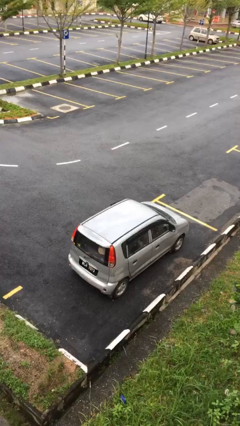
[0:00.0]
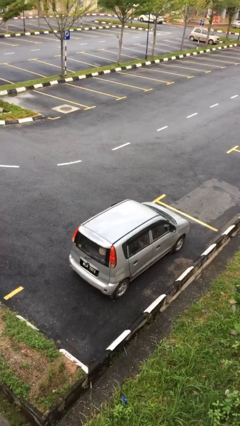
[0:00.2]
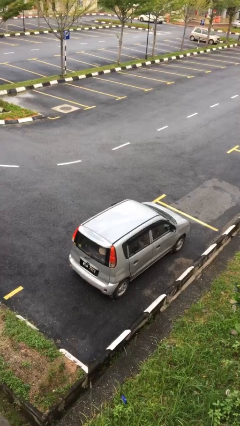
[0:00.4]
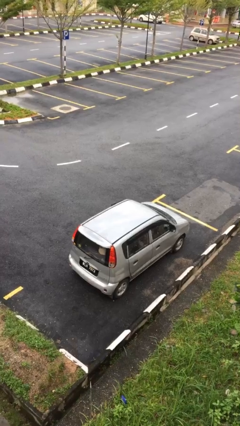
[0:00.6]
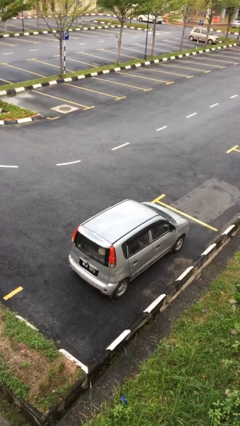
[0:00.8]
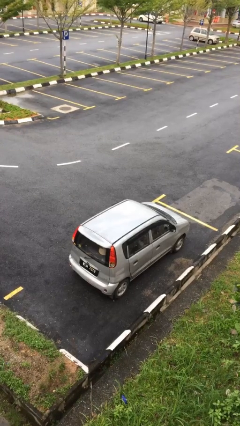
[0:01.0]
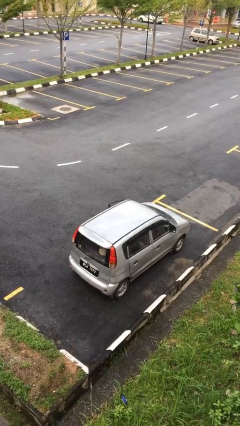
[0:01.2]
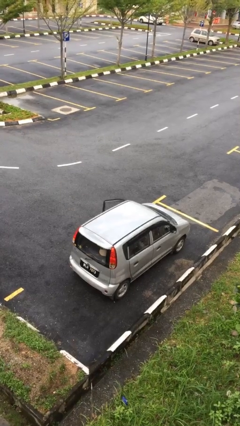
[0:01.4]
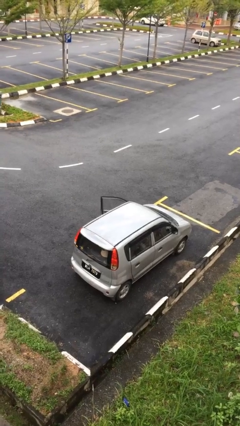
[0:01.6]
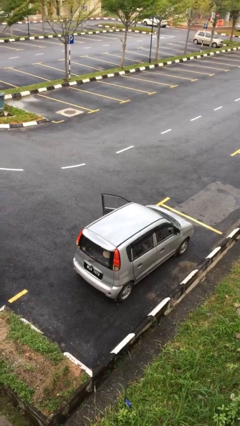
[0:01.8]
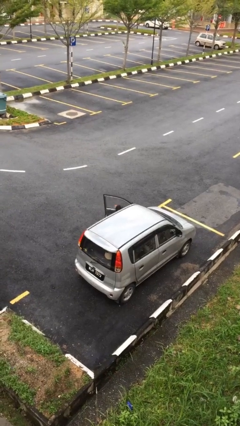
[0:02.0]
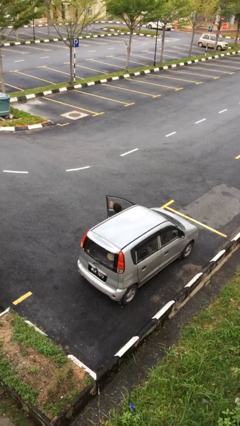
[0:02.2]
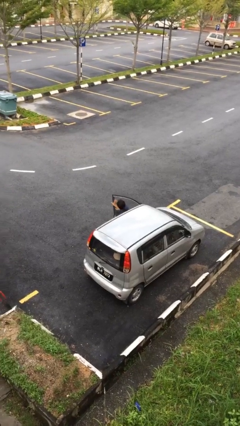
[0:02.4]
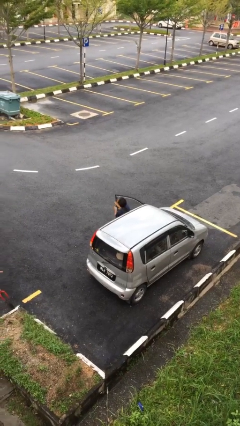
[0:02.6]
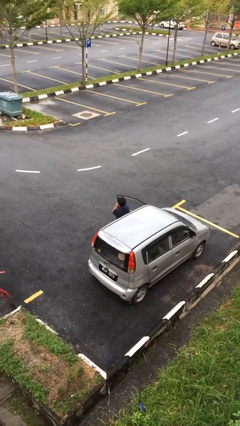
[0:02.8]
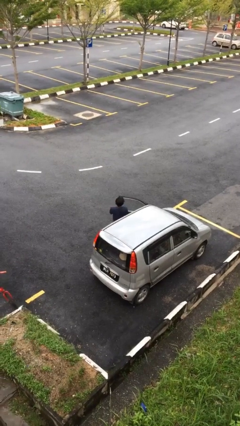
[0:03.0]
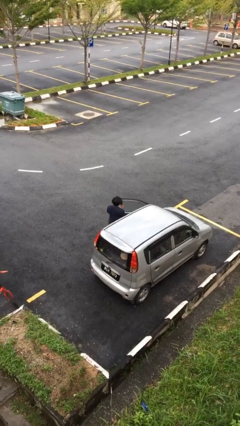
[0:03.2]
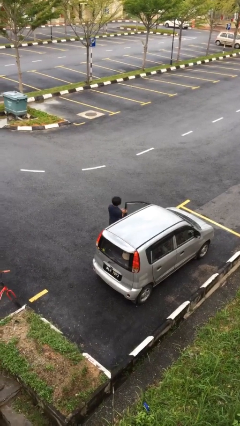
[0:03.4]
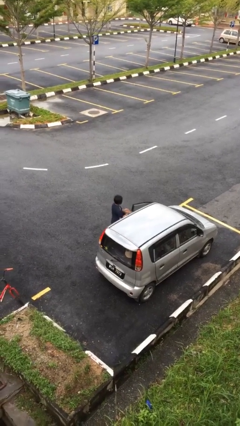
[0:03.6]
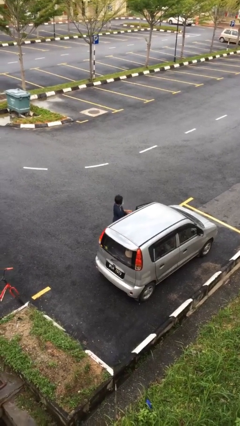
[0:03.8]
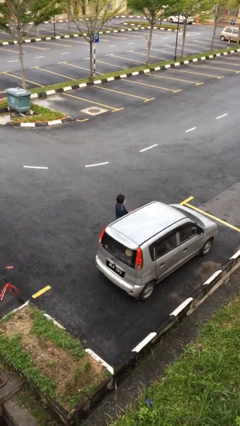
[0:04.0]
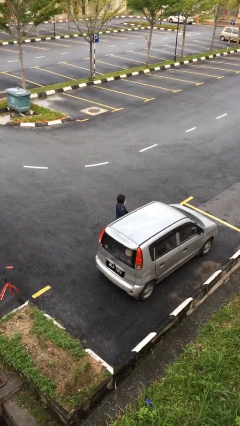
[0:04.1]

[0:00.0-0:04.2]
person exits car

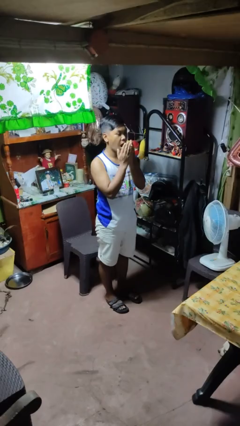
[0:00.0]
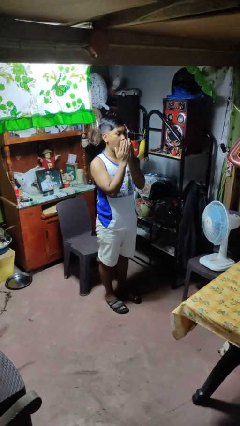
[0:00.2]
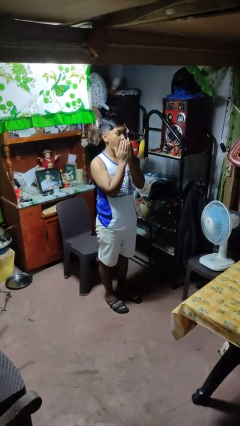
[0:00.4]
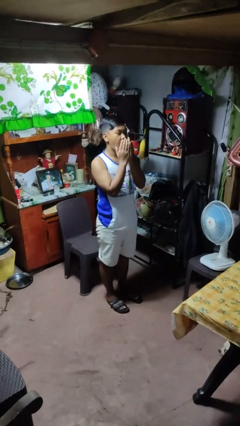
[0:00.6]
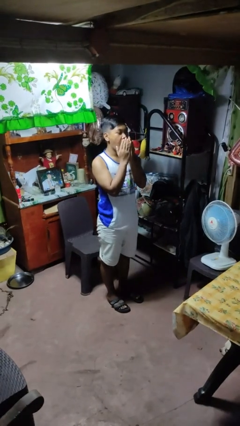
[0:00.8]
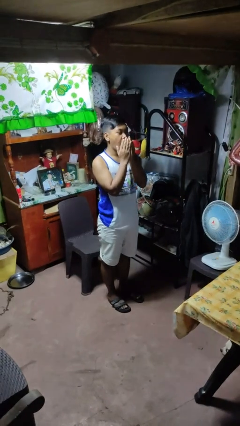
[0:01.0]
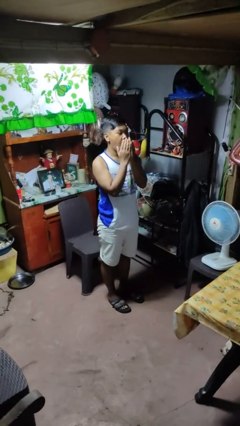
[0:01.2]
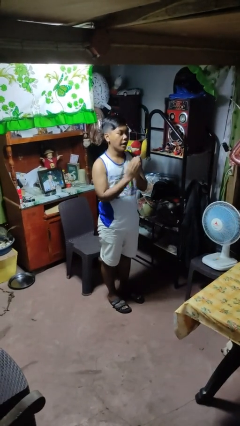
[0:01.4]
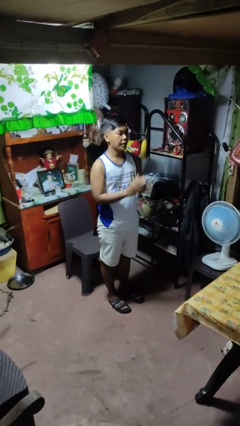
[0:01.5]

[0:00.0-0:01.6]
person yawns

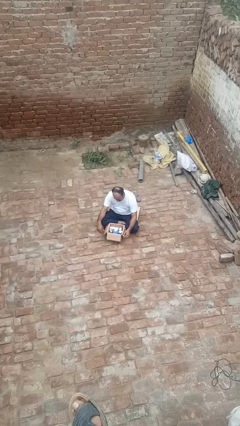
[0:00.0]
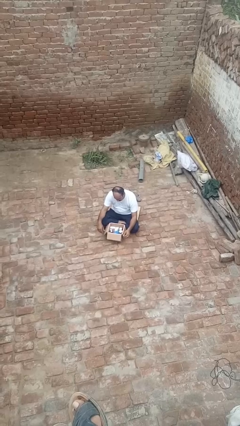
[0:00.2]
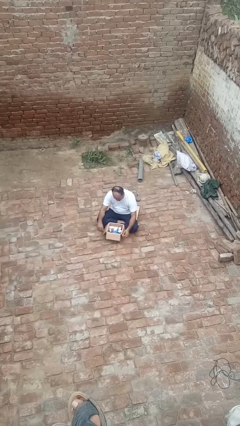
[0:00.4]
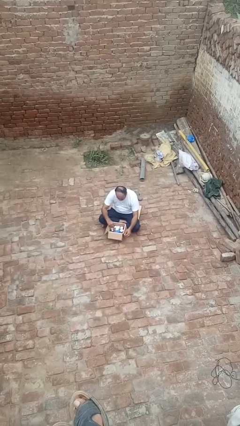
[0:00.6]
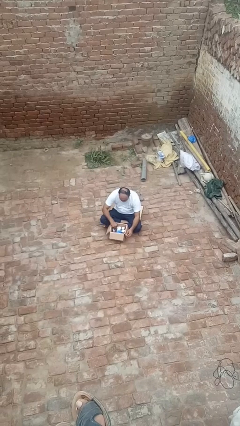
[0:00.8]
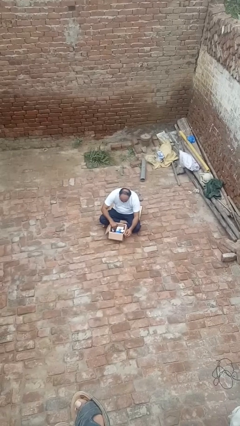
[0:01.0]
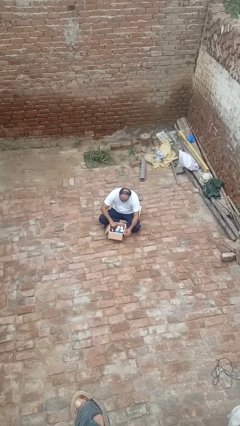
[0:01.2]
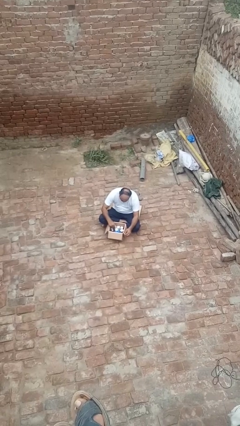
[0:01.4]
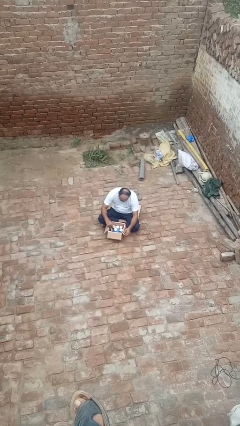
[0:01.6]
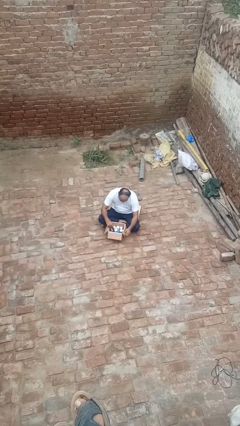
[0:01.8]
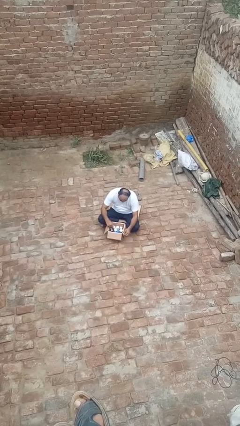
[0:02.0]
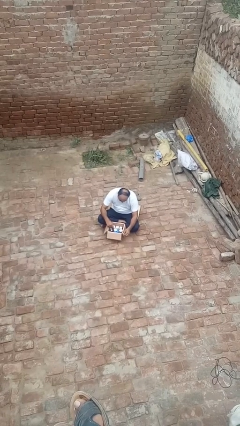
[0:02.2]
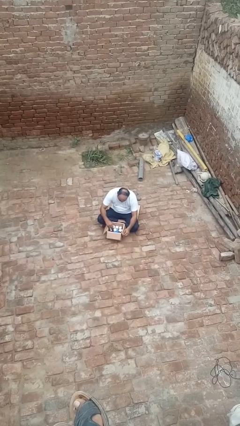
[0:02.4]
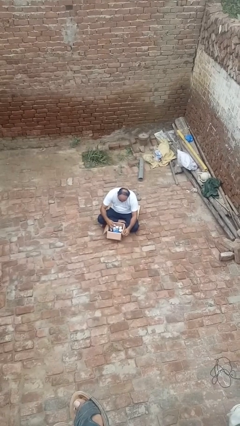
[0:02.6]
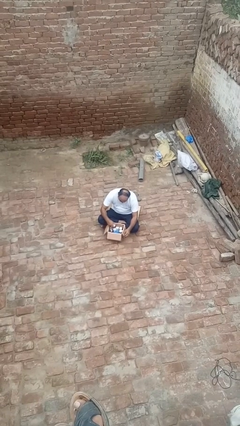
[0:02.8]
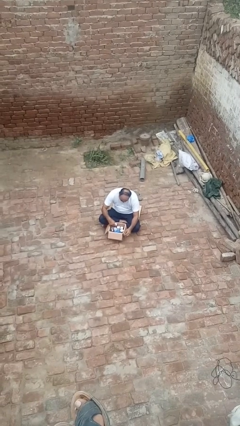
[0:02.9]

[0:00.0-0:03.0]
person searches in box

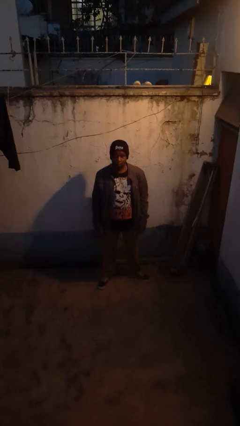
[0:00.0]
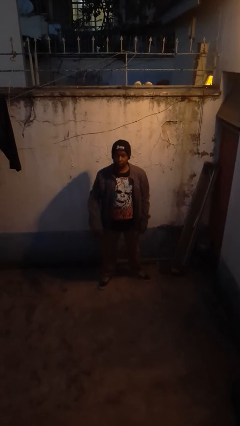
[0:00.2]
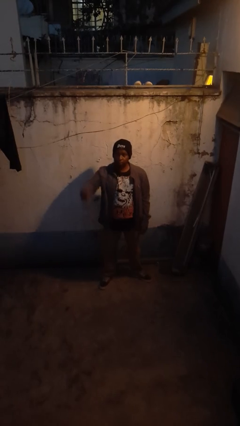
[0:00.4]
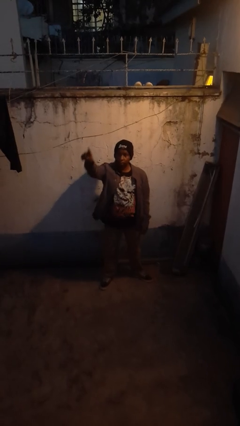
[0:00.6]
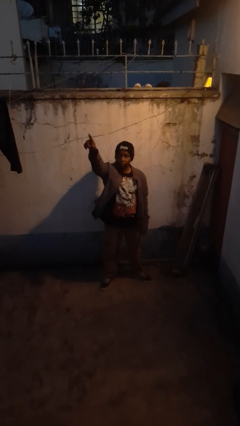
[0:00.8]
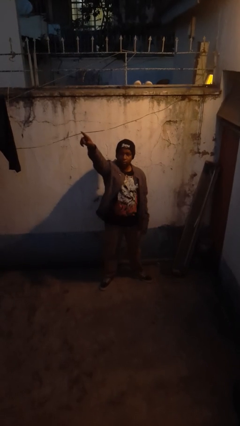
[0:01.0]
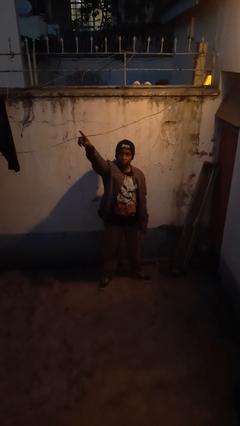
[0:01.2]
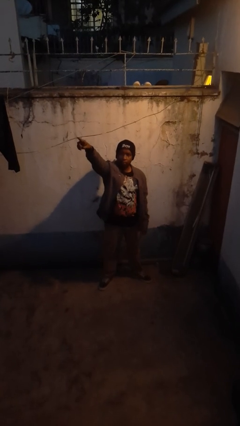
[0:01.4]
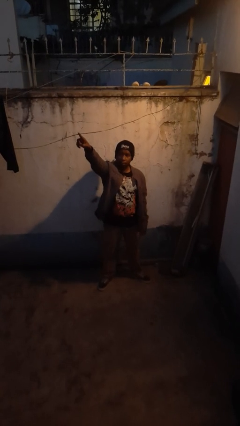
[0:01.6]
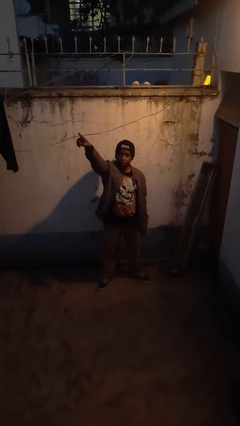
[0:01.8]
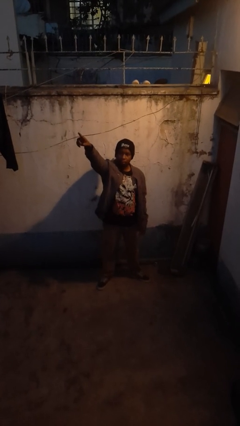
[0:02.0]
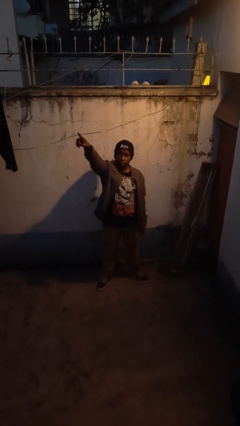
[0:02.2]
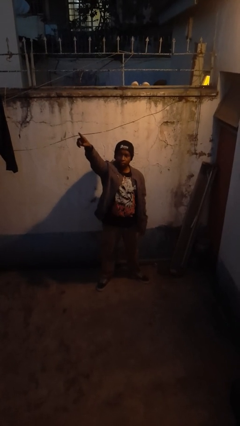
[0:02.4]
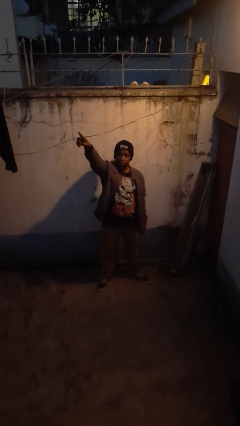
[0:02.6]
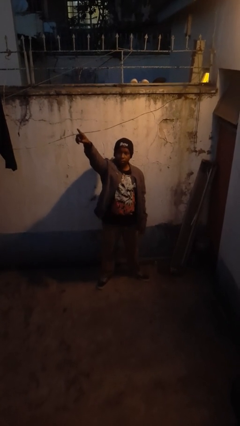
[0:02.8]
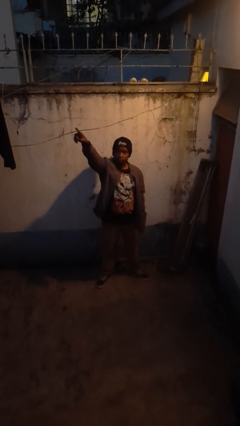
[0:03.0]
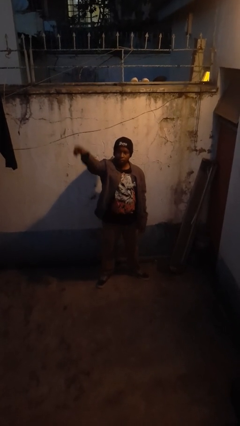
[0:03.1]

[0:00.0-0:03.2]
person points at person

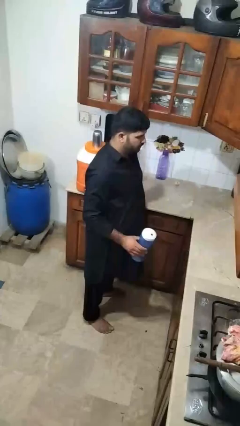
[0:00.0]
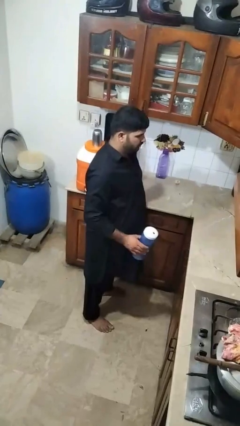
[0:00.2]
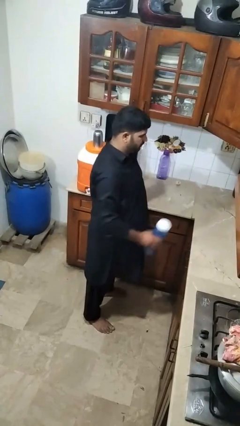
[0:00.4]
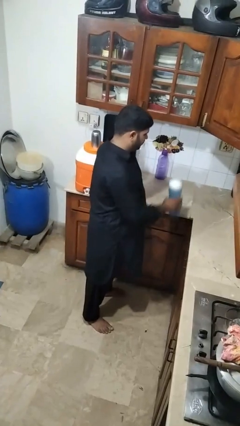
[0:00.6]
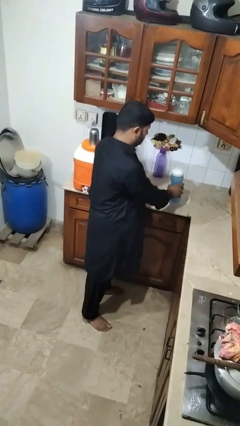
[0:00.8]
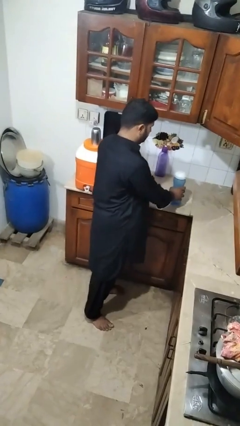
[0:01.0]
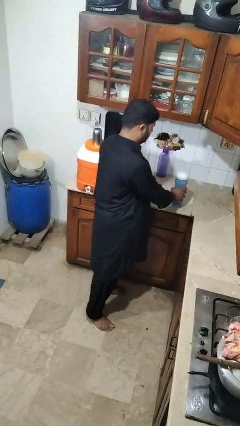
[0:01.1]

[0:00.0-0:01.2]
person puts down object on countertop

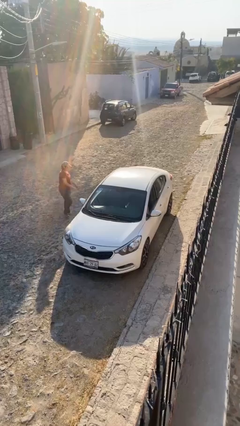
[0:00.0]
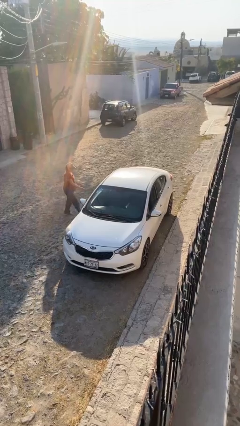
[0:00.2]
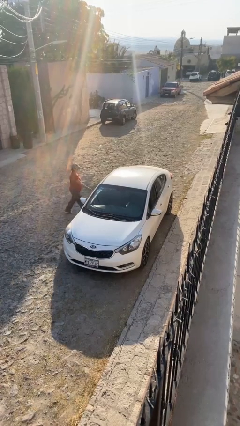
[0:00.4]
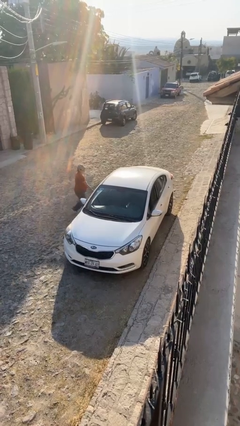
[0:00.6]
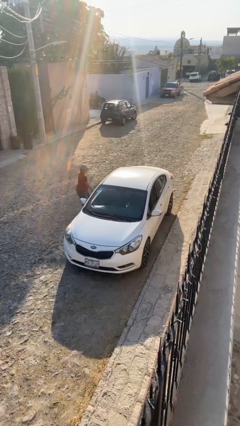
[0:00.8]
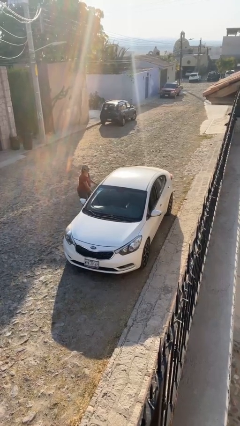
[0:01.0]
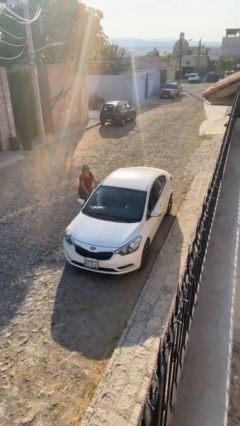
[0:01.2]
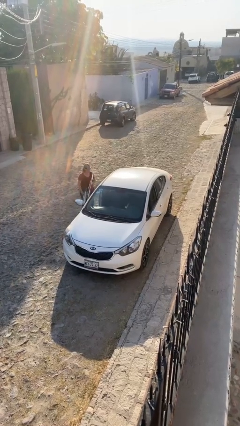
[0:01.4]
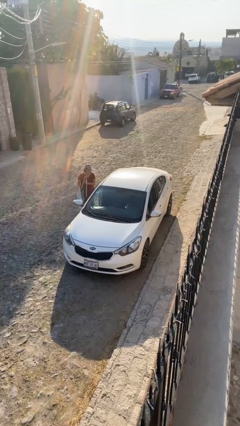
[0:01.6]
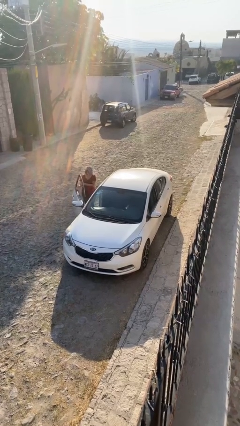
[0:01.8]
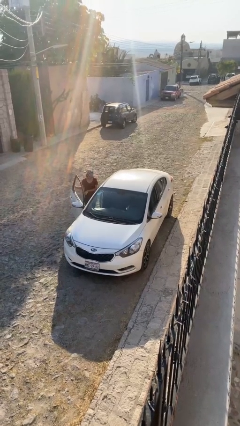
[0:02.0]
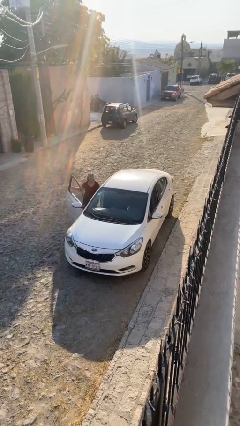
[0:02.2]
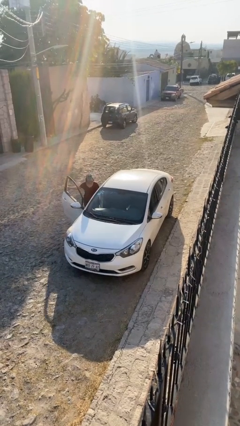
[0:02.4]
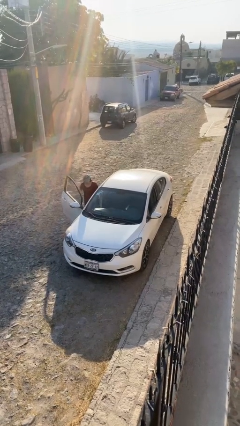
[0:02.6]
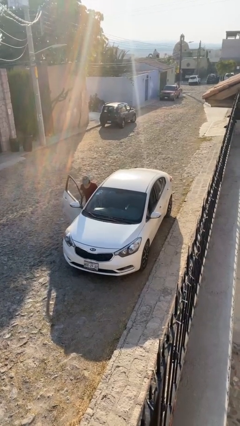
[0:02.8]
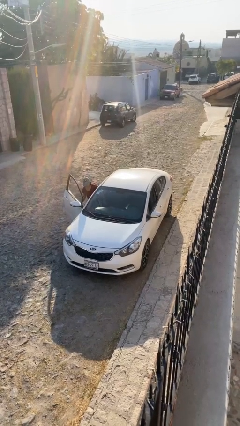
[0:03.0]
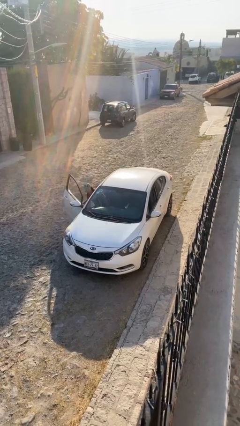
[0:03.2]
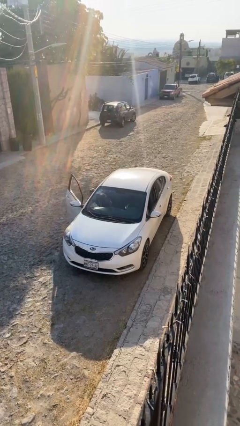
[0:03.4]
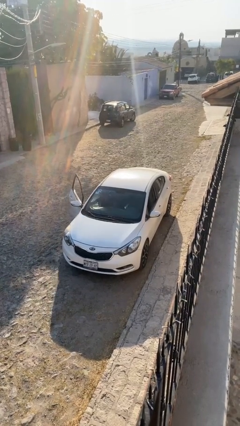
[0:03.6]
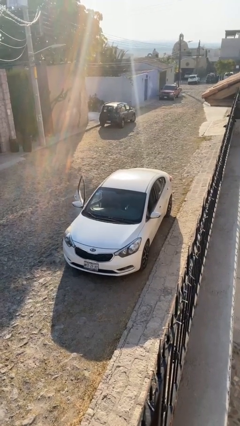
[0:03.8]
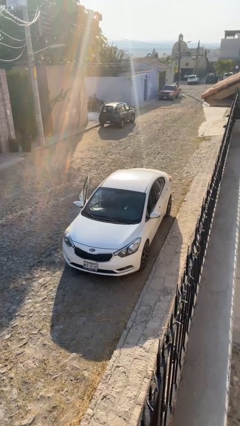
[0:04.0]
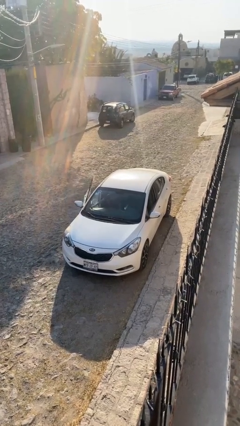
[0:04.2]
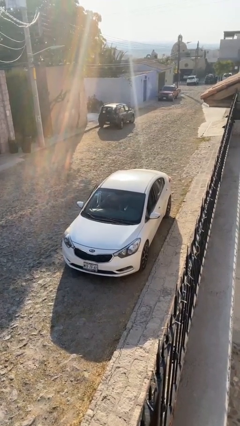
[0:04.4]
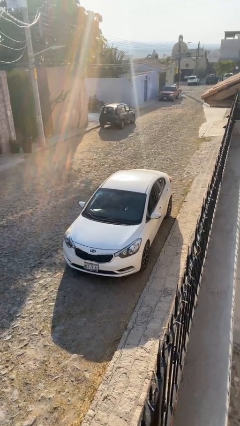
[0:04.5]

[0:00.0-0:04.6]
car picks up person
